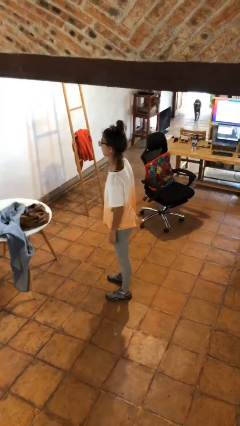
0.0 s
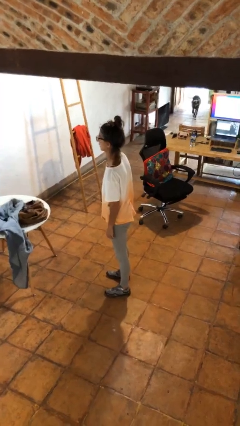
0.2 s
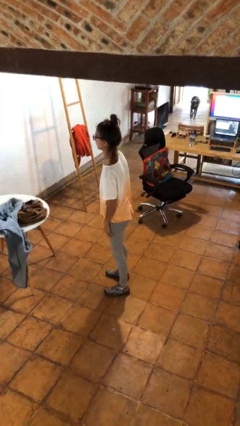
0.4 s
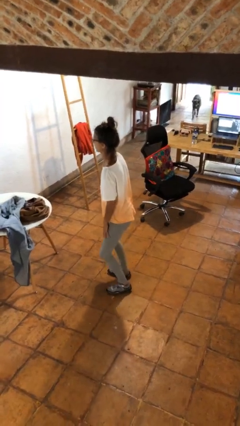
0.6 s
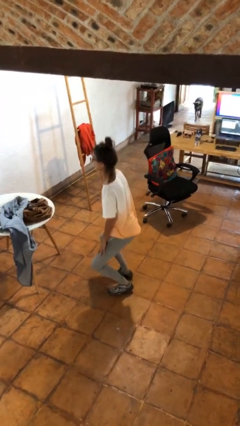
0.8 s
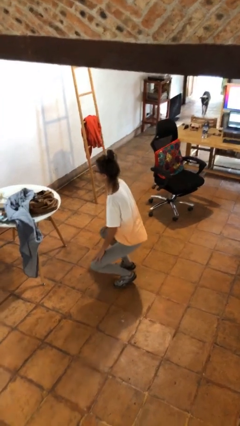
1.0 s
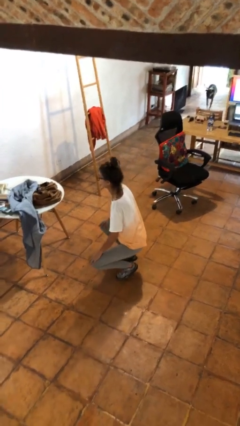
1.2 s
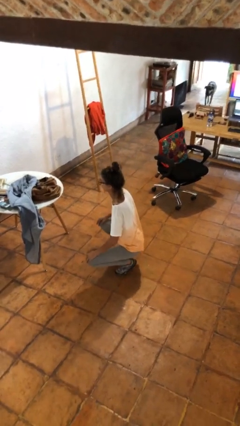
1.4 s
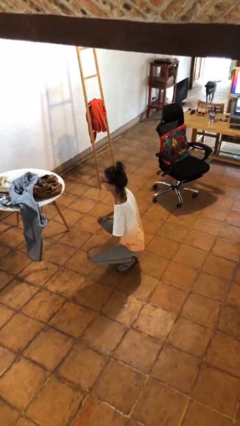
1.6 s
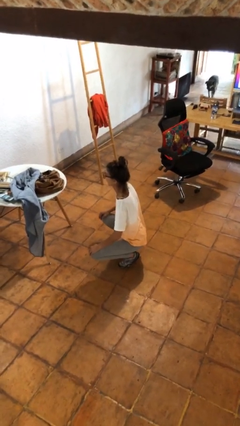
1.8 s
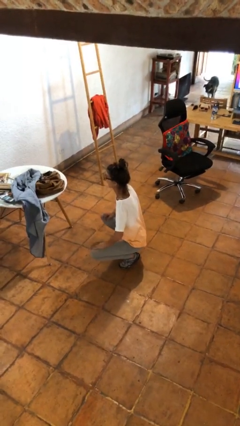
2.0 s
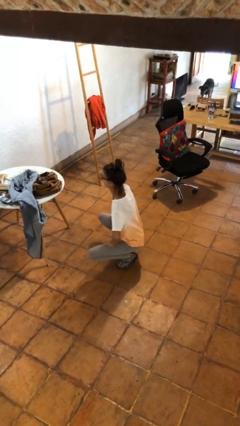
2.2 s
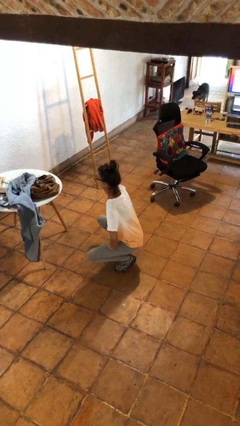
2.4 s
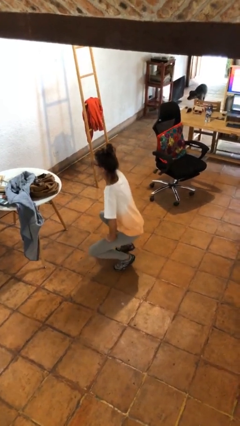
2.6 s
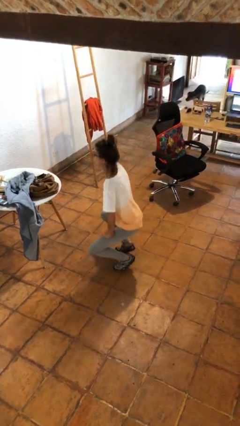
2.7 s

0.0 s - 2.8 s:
person squats

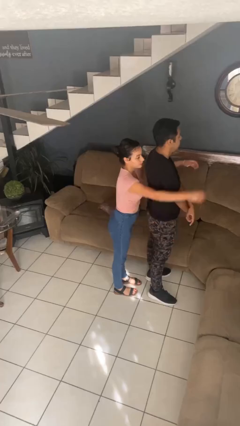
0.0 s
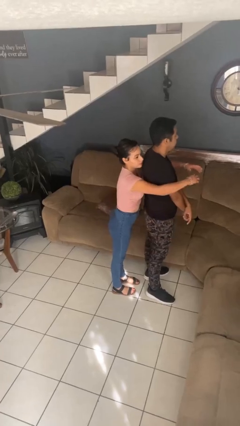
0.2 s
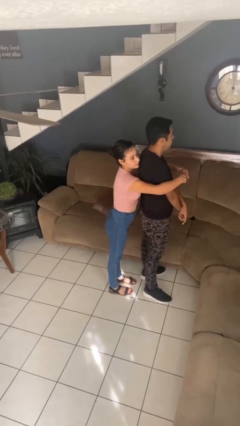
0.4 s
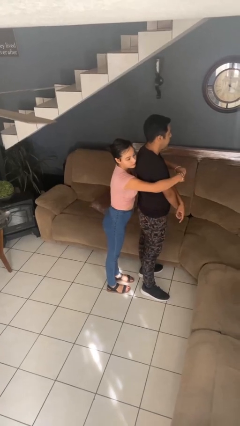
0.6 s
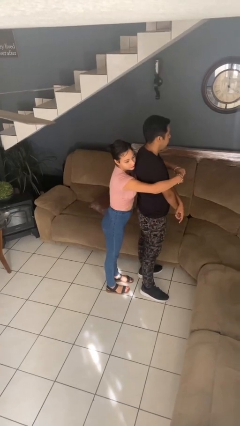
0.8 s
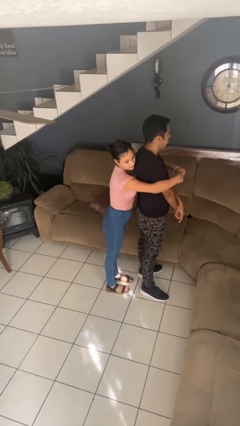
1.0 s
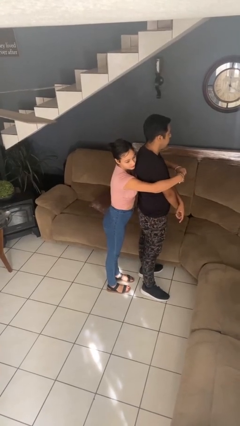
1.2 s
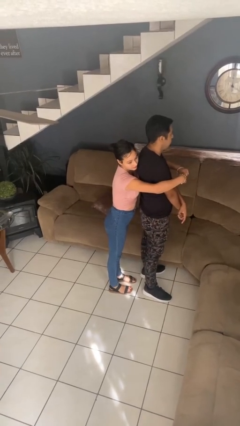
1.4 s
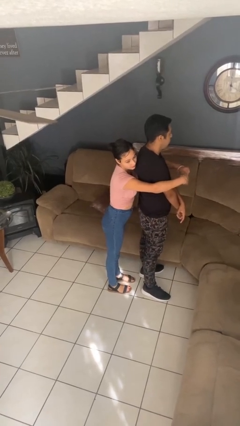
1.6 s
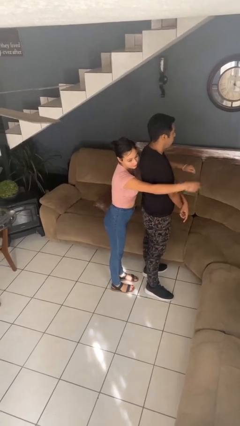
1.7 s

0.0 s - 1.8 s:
person hugs person from behind

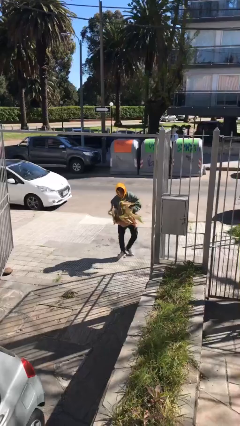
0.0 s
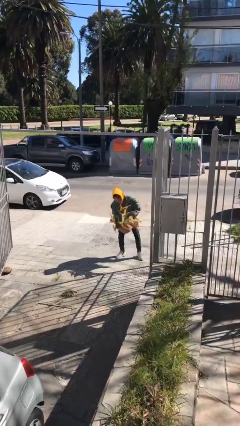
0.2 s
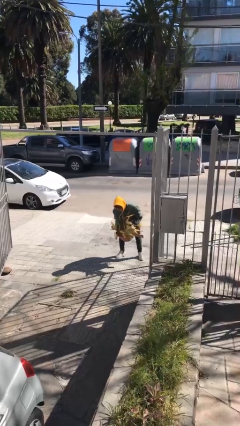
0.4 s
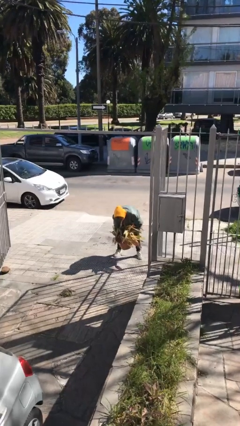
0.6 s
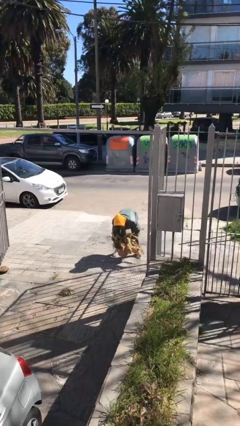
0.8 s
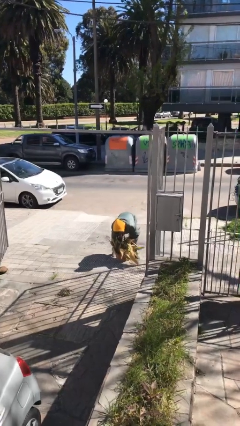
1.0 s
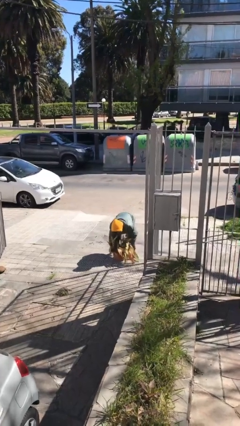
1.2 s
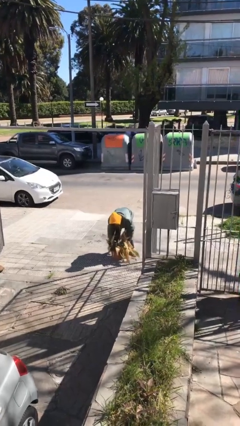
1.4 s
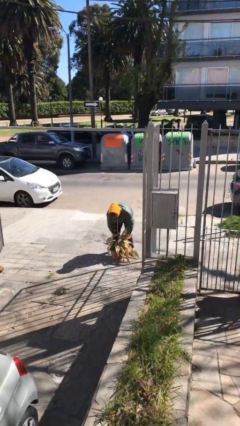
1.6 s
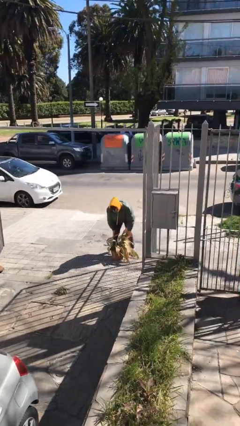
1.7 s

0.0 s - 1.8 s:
person puts down object on floor

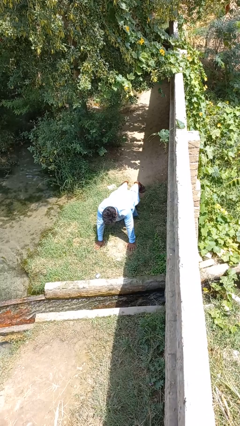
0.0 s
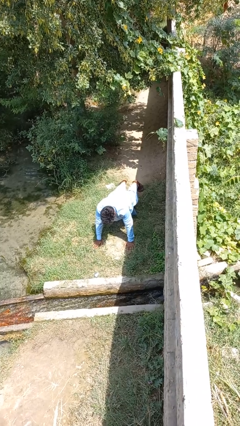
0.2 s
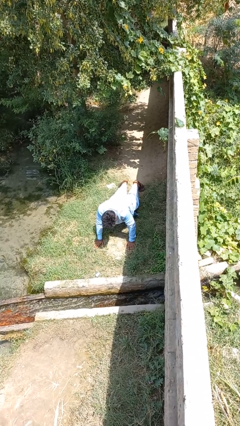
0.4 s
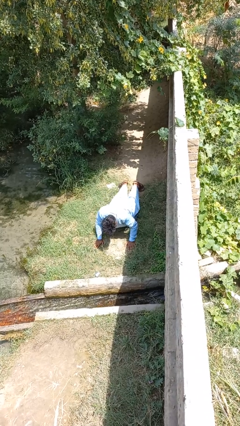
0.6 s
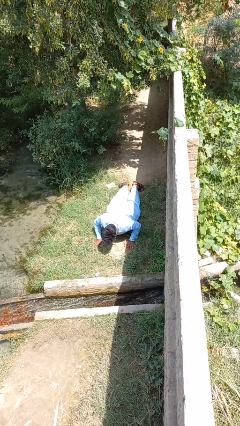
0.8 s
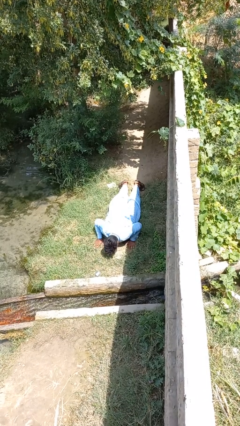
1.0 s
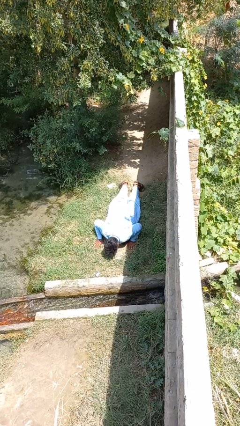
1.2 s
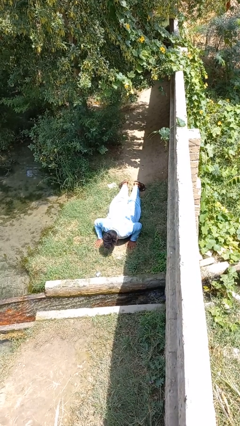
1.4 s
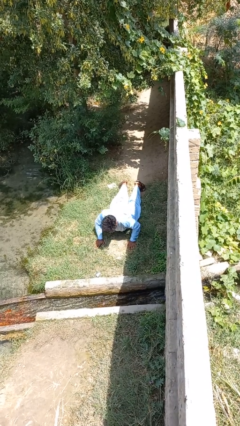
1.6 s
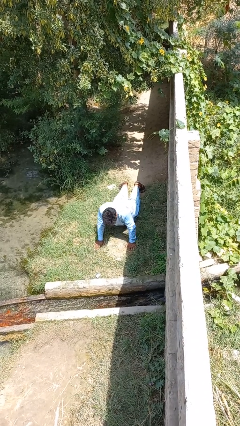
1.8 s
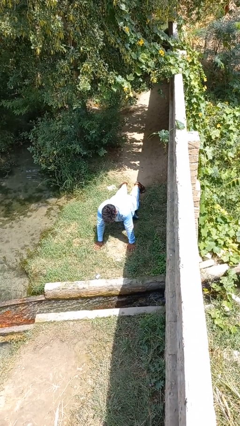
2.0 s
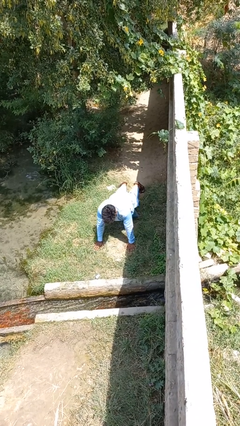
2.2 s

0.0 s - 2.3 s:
person exercises with pushup

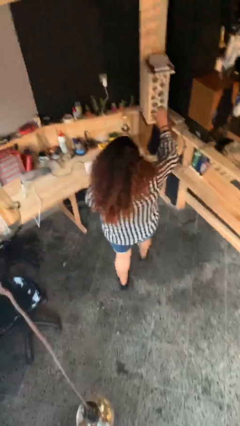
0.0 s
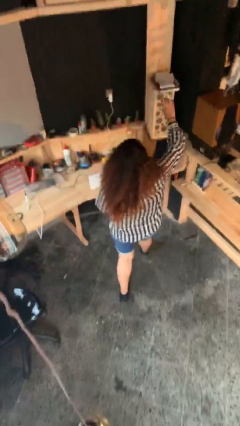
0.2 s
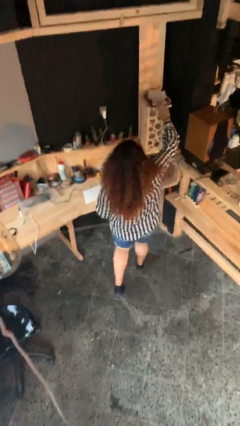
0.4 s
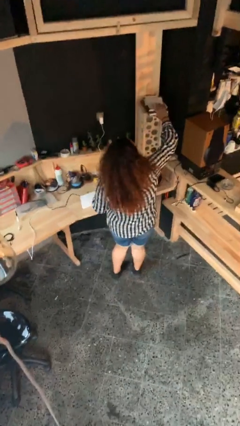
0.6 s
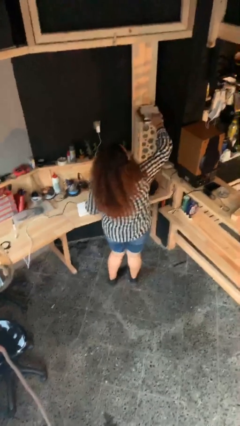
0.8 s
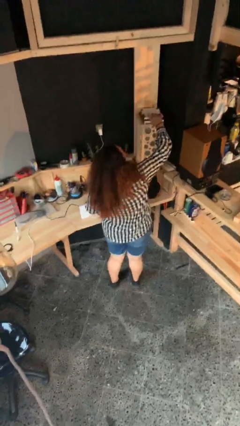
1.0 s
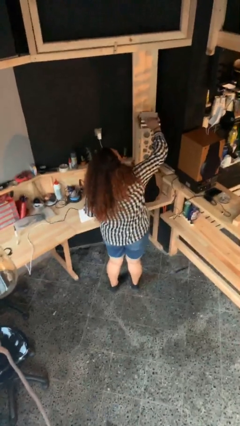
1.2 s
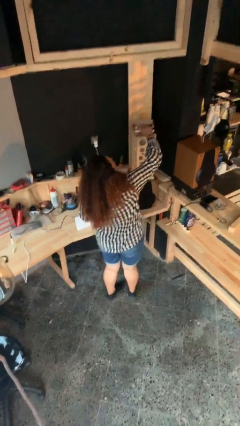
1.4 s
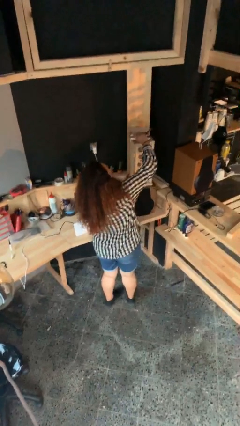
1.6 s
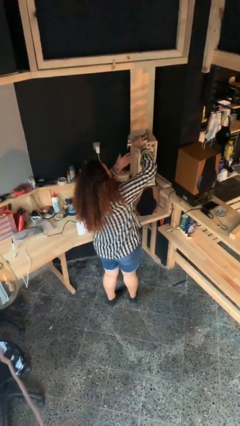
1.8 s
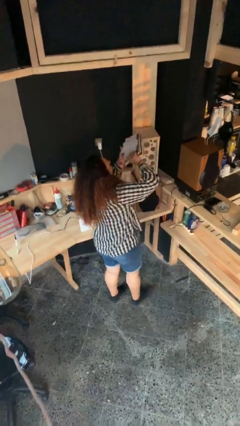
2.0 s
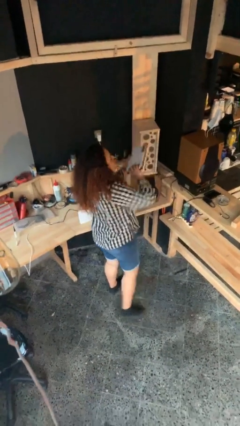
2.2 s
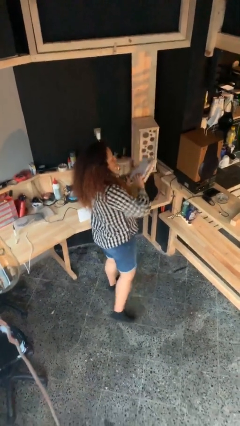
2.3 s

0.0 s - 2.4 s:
person picks up object from shelf

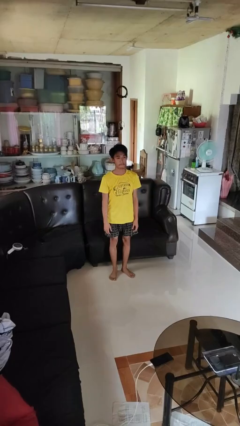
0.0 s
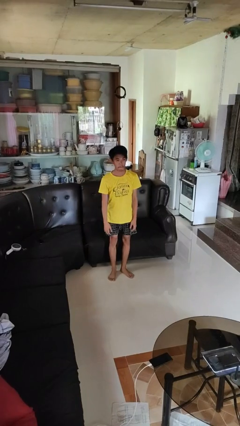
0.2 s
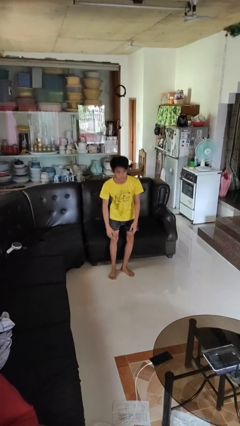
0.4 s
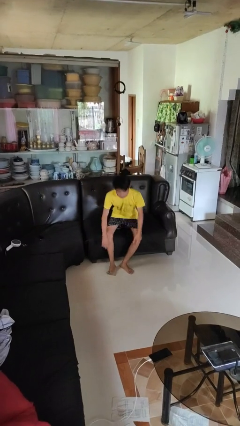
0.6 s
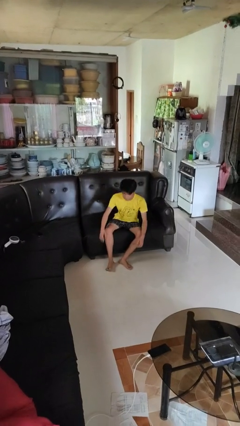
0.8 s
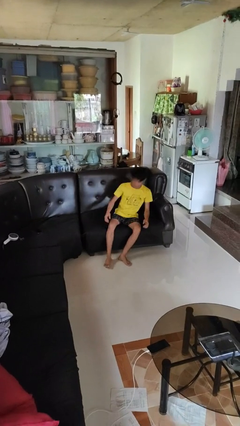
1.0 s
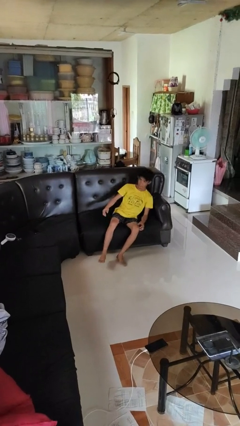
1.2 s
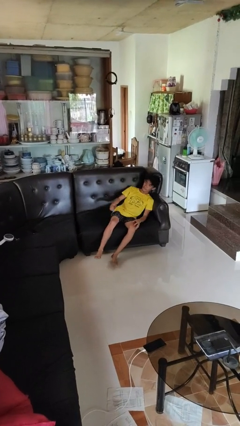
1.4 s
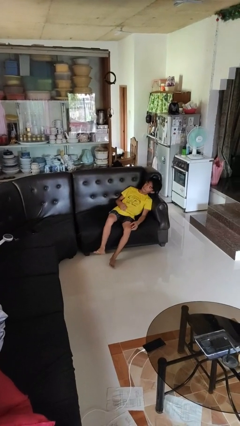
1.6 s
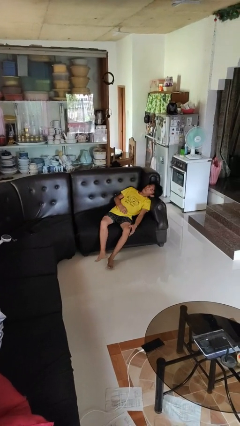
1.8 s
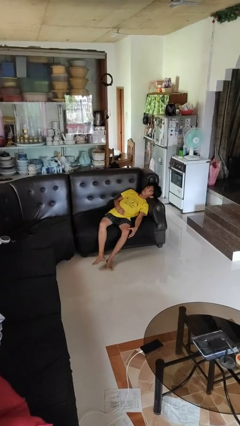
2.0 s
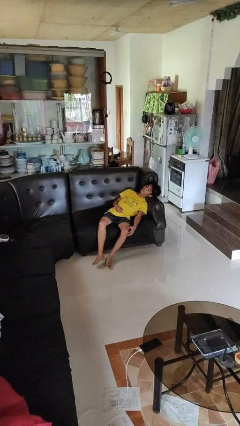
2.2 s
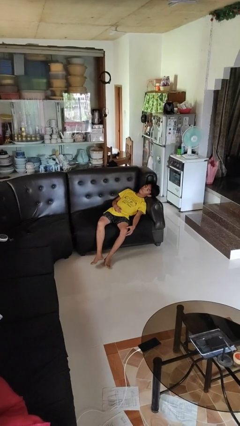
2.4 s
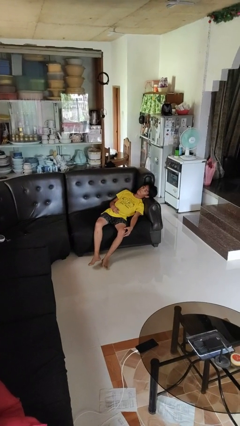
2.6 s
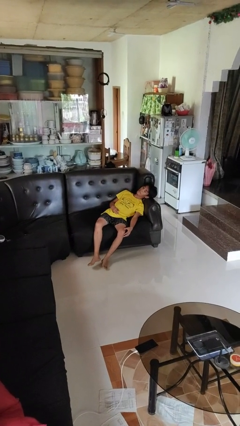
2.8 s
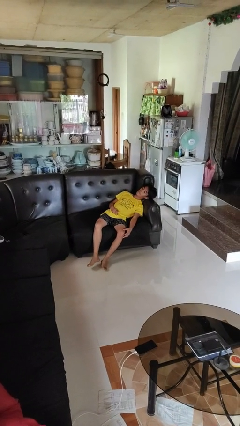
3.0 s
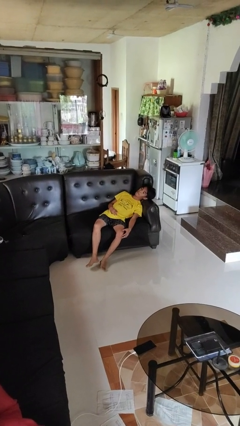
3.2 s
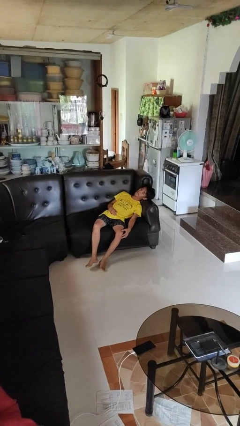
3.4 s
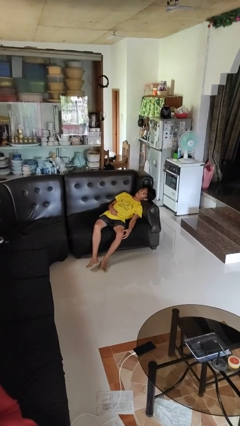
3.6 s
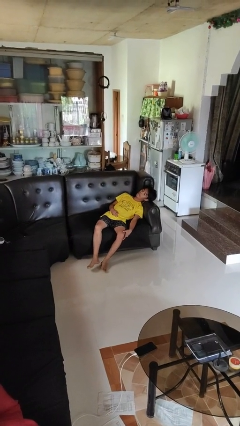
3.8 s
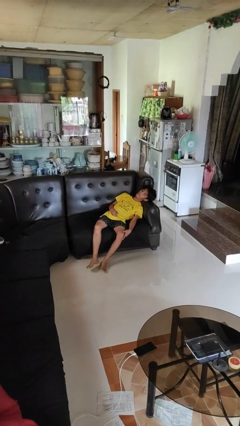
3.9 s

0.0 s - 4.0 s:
person lies down on couch

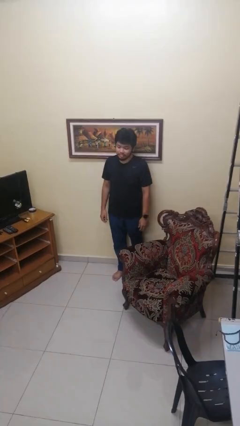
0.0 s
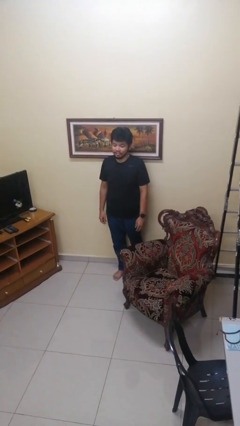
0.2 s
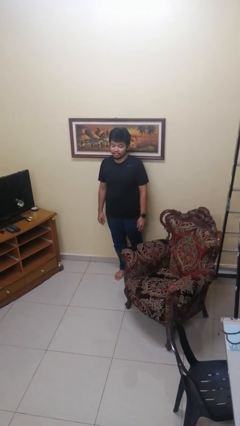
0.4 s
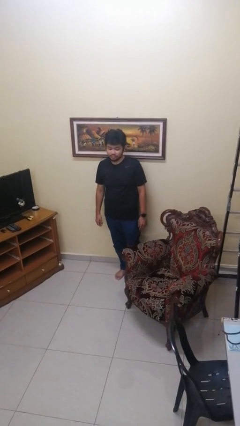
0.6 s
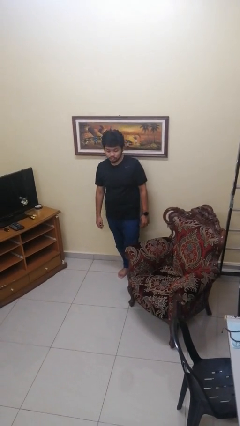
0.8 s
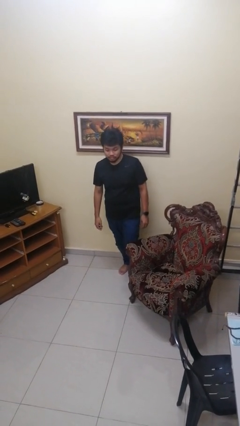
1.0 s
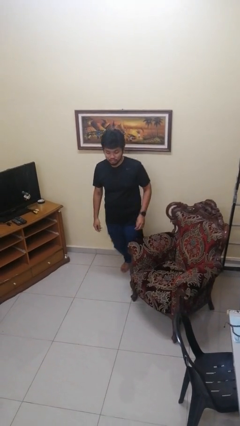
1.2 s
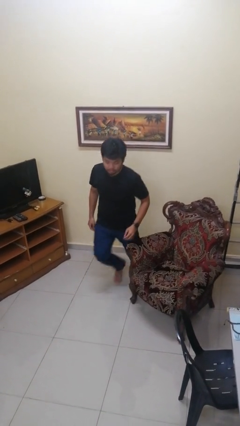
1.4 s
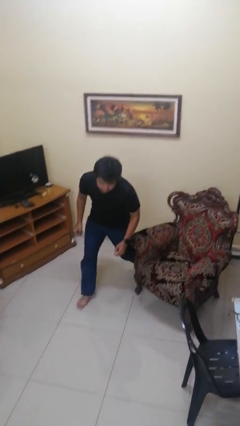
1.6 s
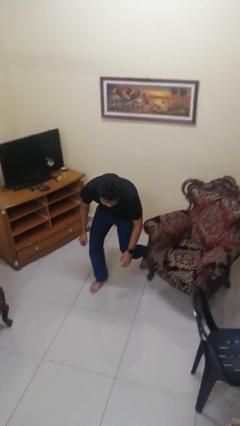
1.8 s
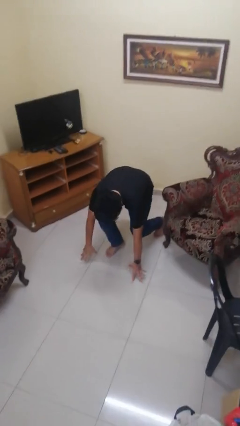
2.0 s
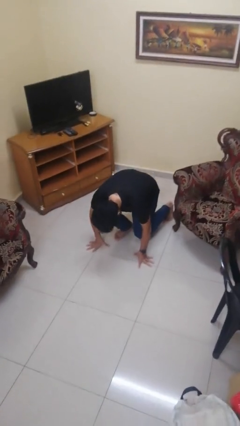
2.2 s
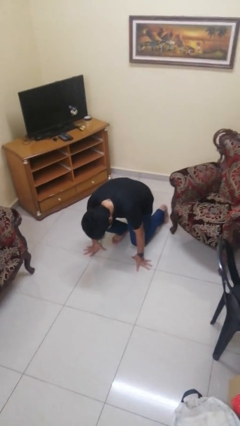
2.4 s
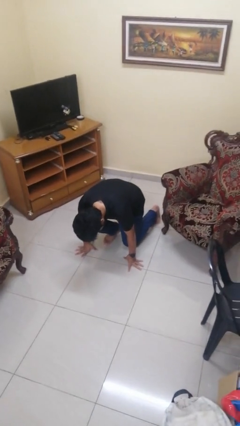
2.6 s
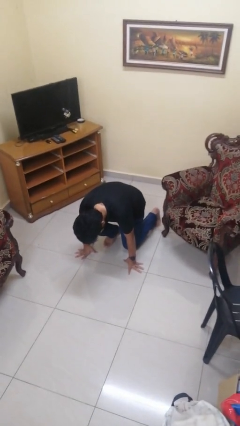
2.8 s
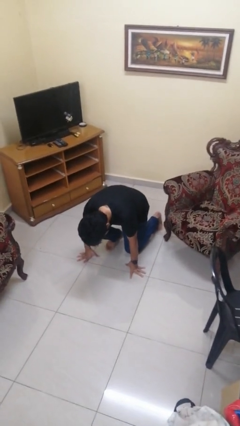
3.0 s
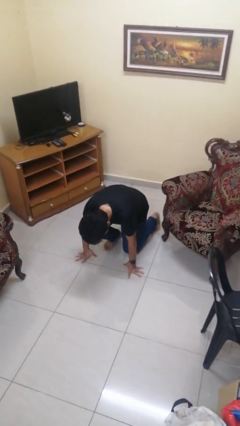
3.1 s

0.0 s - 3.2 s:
person trips on object on floor
